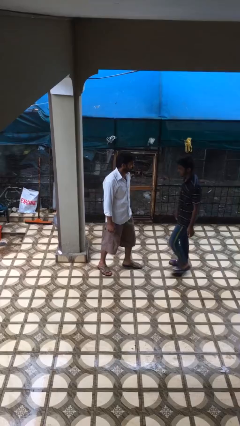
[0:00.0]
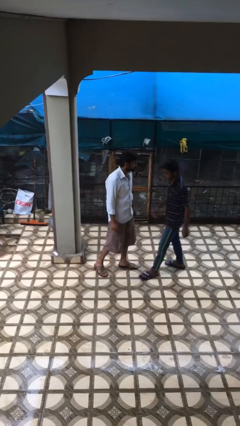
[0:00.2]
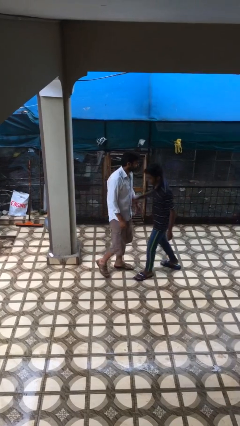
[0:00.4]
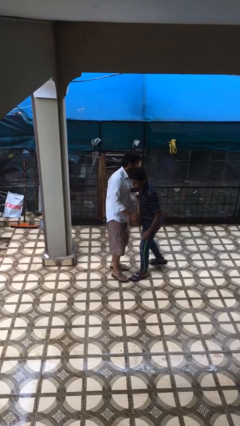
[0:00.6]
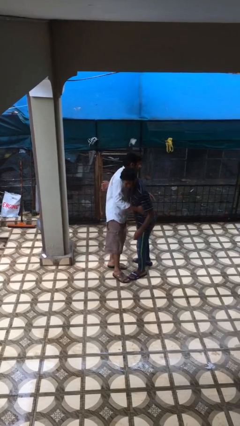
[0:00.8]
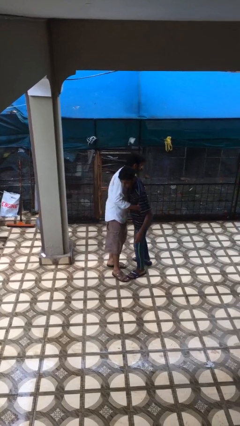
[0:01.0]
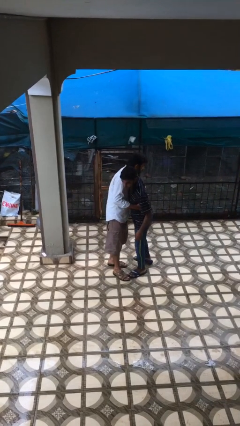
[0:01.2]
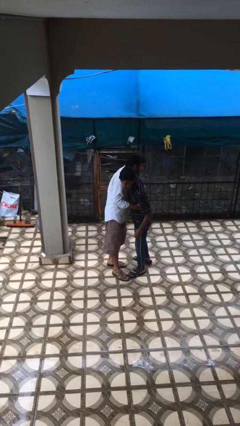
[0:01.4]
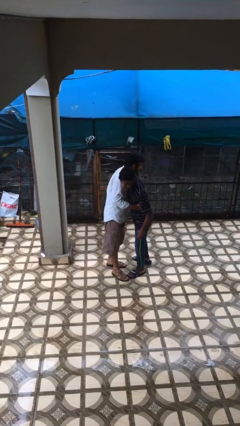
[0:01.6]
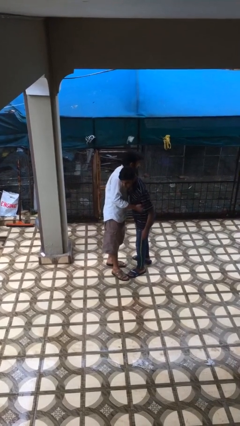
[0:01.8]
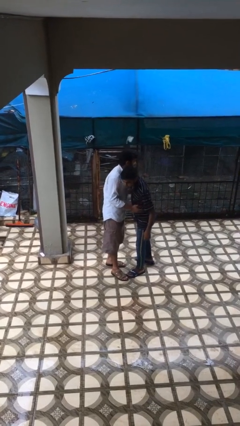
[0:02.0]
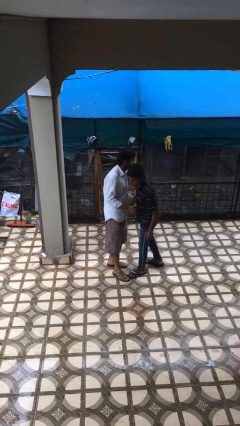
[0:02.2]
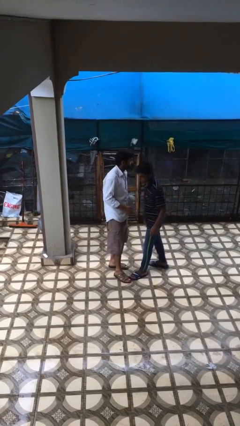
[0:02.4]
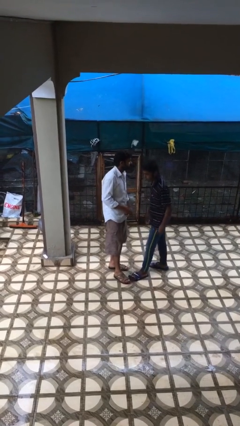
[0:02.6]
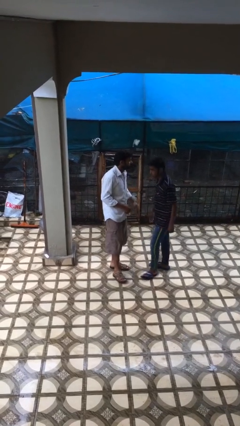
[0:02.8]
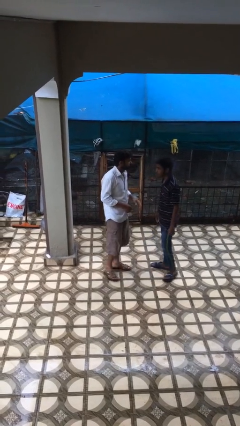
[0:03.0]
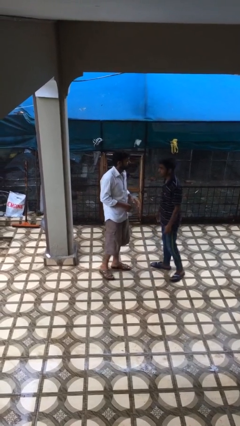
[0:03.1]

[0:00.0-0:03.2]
person embraces person

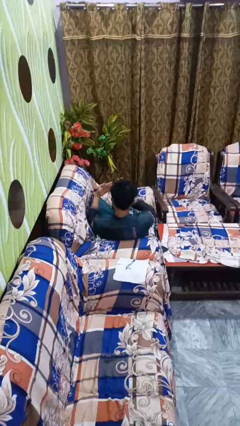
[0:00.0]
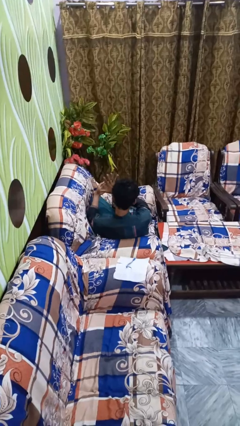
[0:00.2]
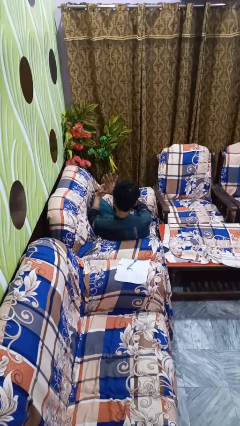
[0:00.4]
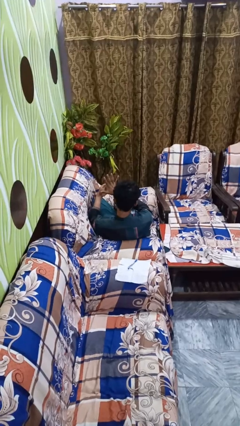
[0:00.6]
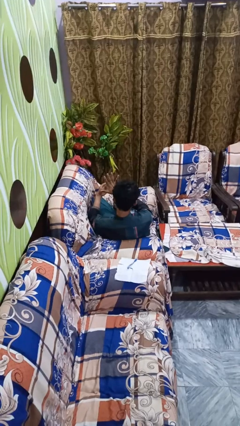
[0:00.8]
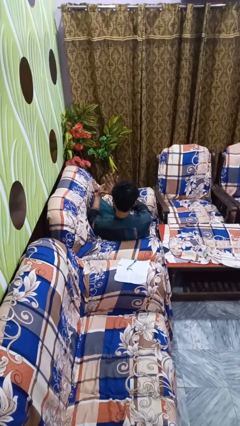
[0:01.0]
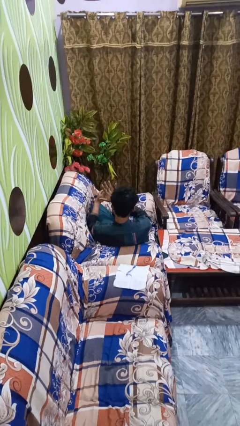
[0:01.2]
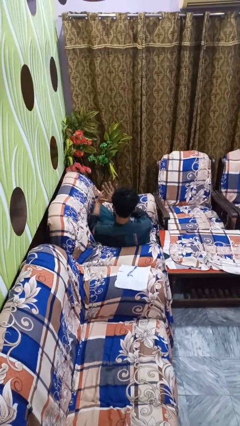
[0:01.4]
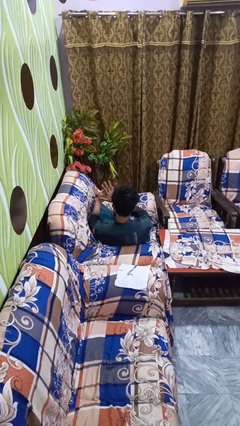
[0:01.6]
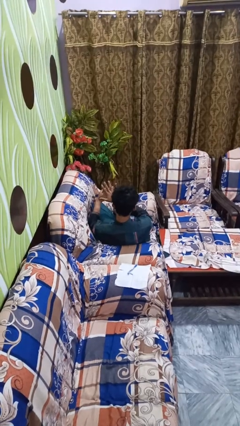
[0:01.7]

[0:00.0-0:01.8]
person gestures number five

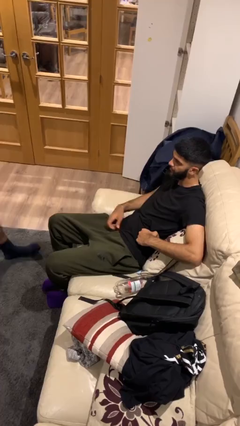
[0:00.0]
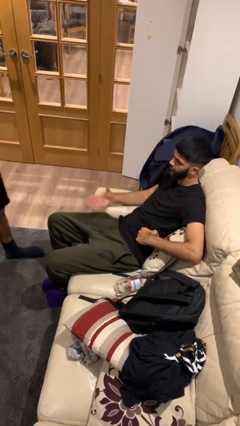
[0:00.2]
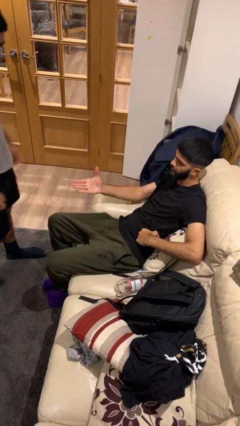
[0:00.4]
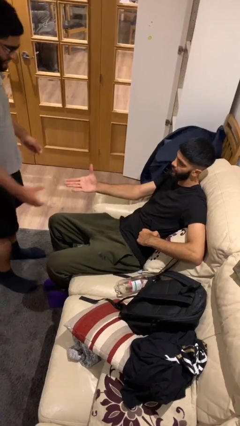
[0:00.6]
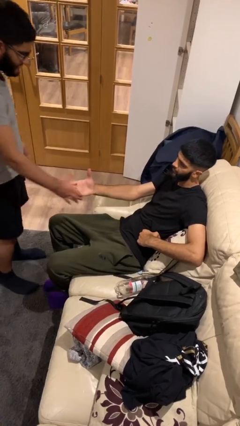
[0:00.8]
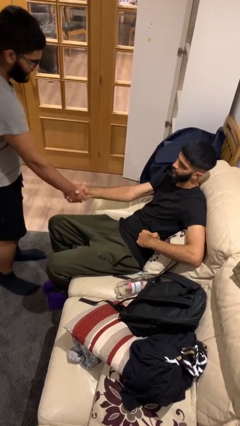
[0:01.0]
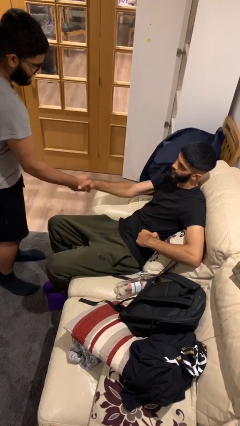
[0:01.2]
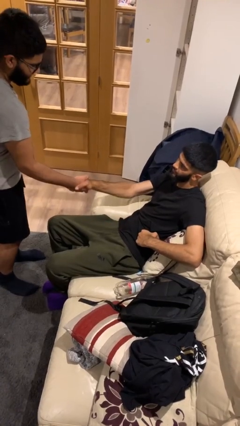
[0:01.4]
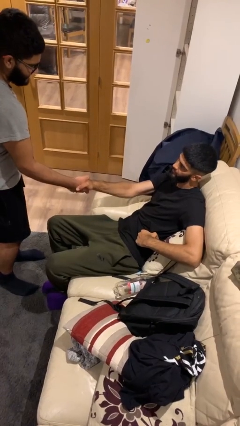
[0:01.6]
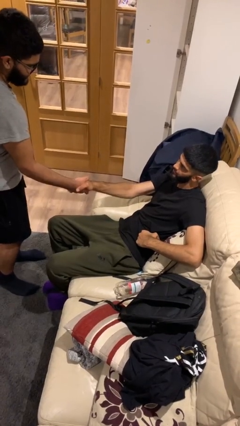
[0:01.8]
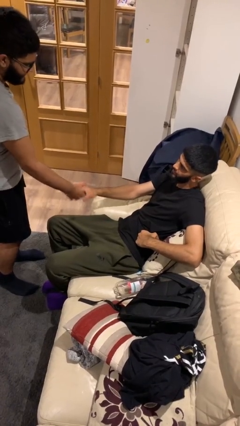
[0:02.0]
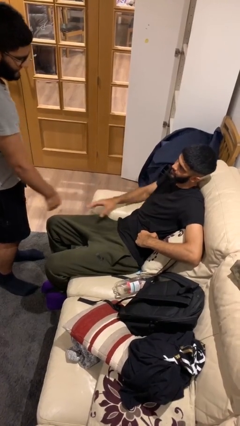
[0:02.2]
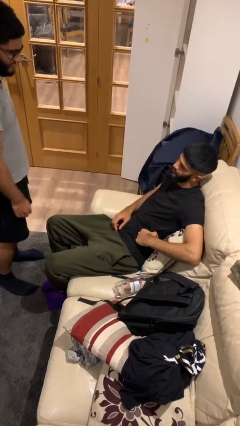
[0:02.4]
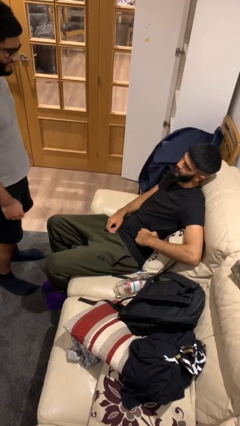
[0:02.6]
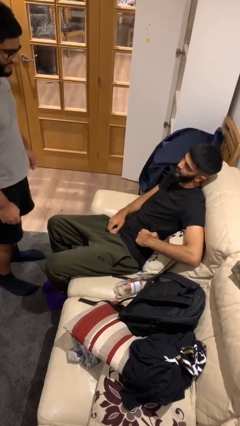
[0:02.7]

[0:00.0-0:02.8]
person shakes hand

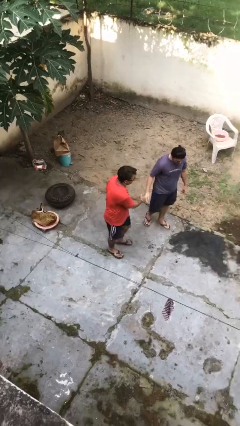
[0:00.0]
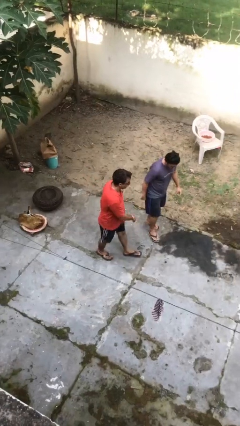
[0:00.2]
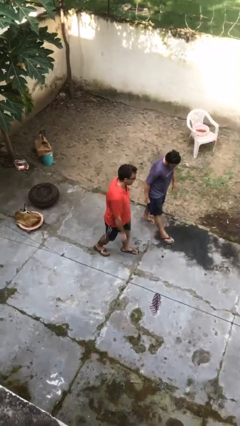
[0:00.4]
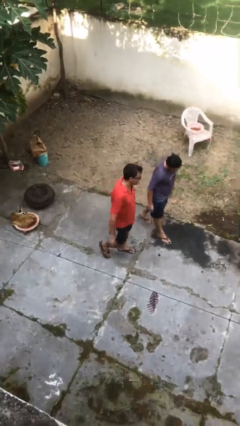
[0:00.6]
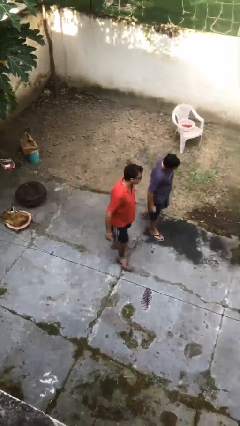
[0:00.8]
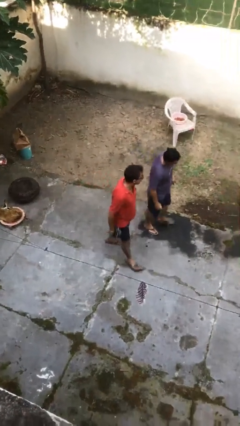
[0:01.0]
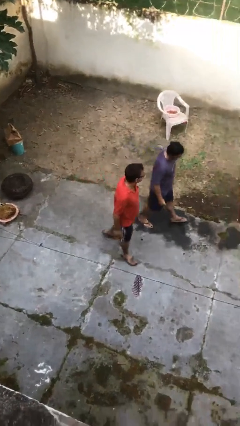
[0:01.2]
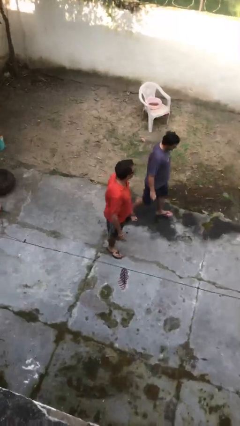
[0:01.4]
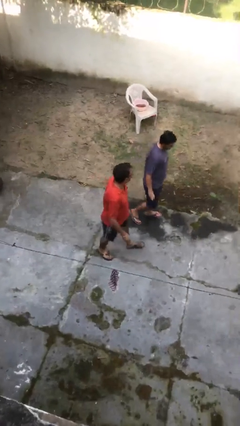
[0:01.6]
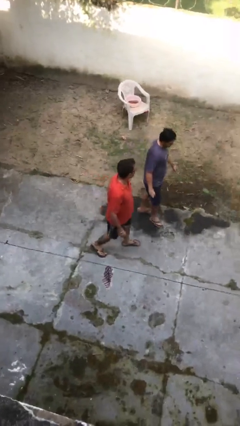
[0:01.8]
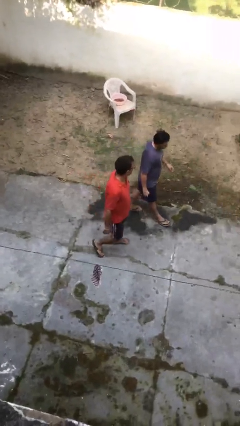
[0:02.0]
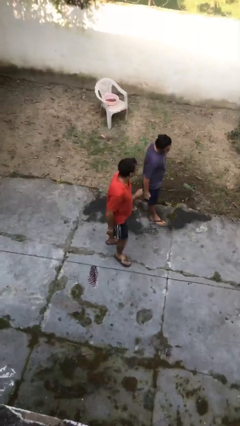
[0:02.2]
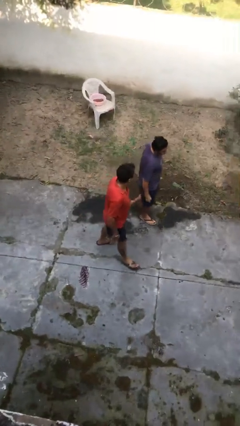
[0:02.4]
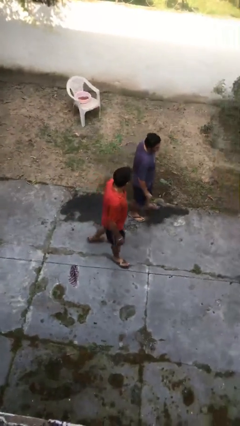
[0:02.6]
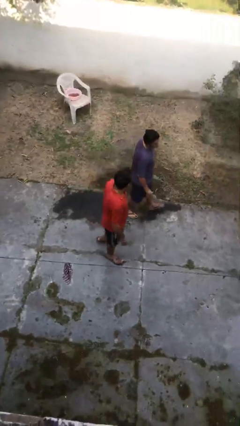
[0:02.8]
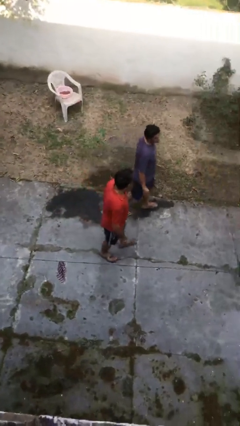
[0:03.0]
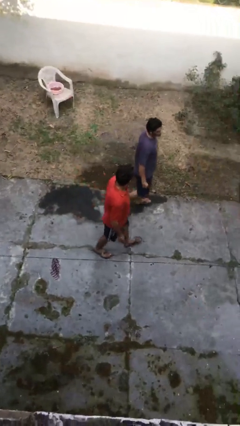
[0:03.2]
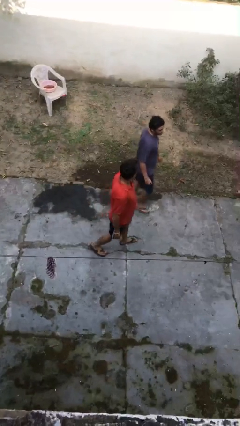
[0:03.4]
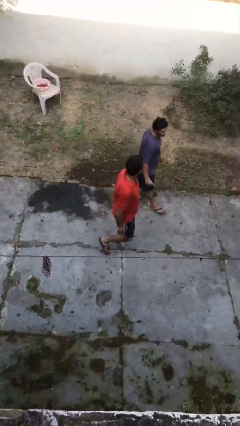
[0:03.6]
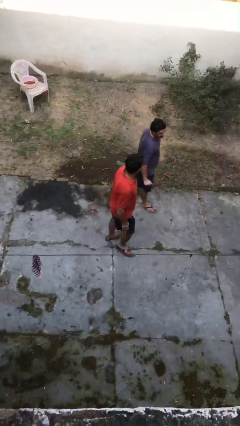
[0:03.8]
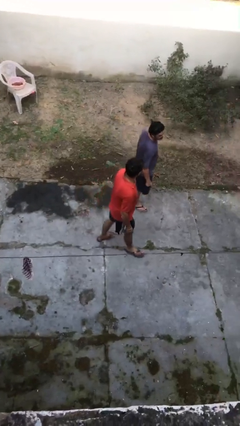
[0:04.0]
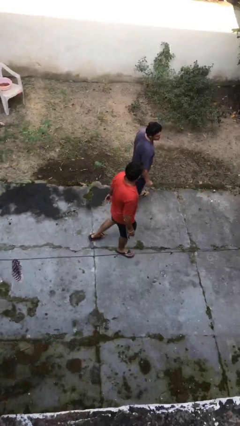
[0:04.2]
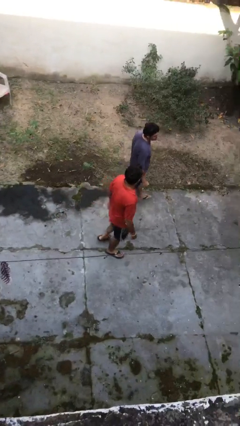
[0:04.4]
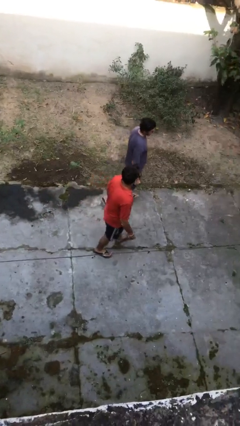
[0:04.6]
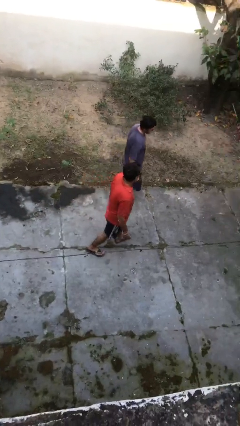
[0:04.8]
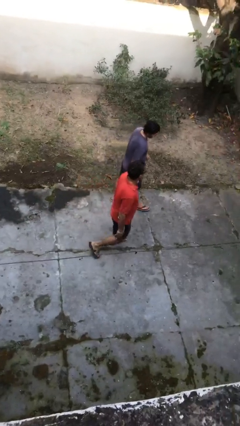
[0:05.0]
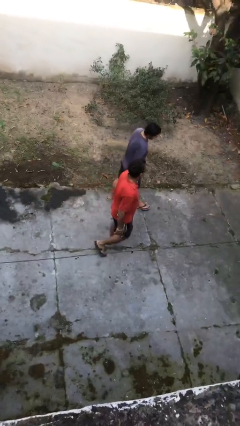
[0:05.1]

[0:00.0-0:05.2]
person talks to person

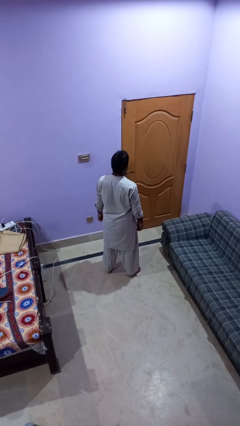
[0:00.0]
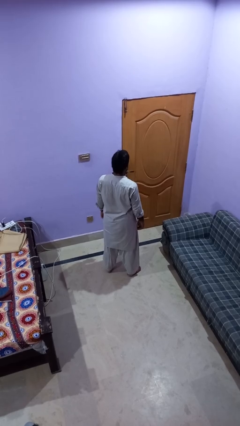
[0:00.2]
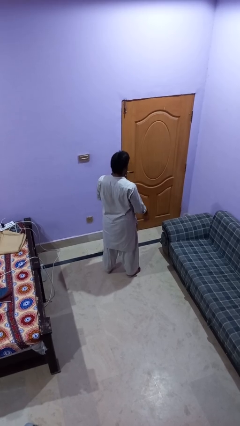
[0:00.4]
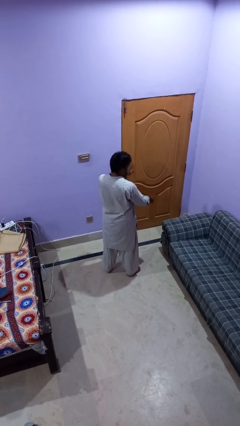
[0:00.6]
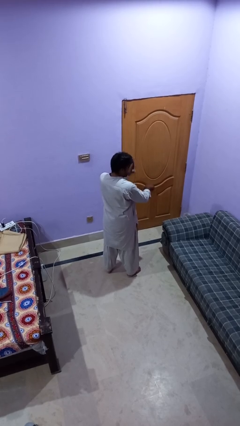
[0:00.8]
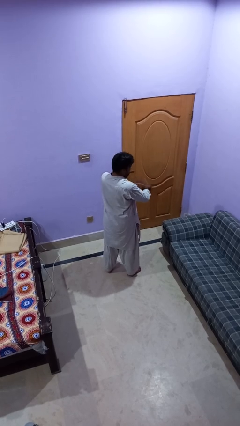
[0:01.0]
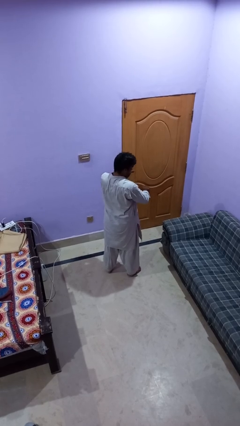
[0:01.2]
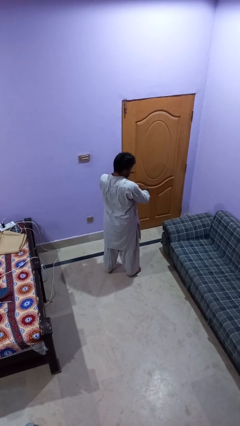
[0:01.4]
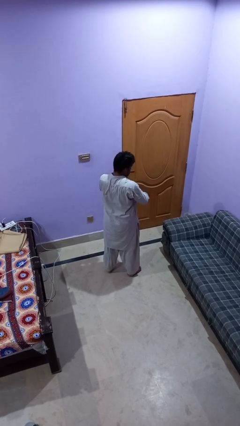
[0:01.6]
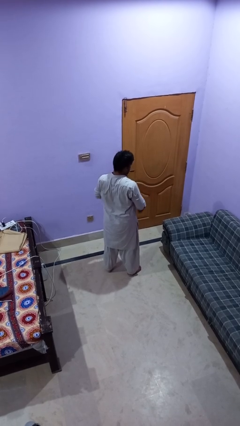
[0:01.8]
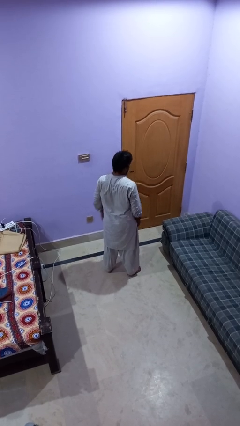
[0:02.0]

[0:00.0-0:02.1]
person swats bug

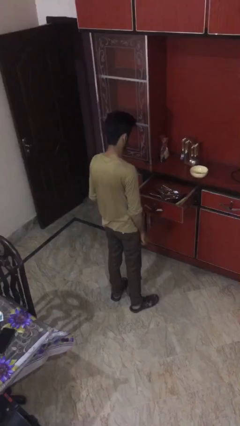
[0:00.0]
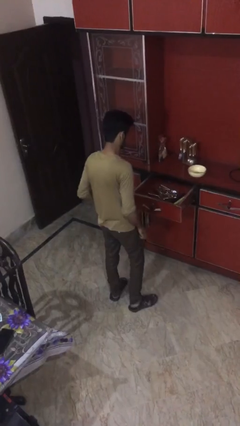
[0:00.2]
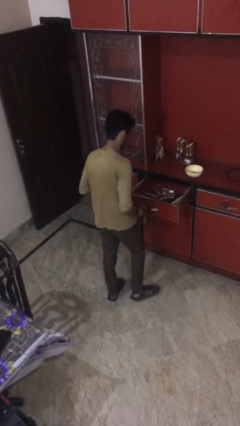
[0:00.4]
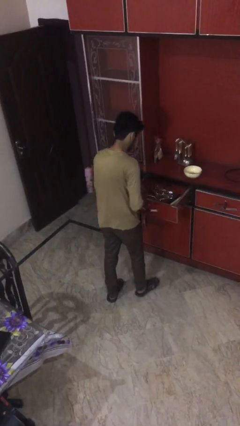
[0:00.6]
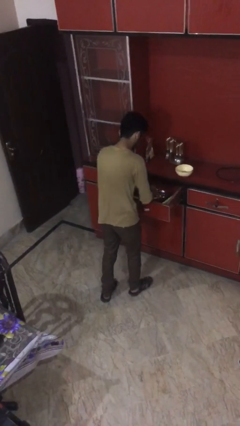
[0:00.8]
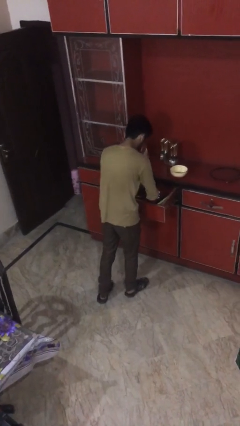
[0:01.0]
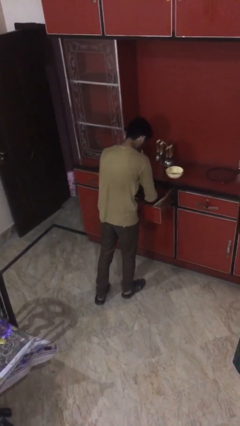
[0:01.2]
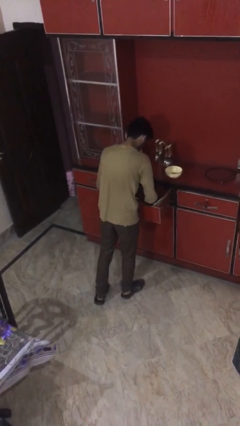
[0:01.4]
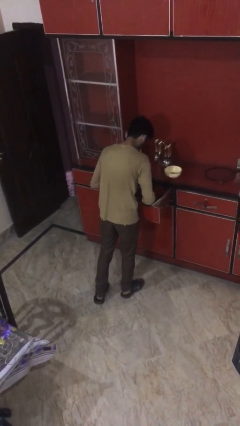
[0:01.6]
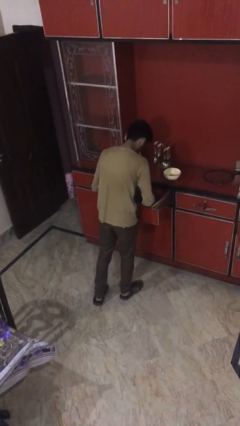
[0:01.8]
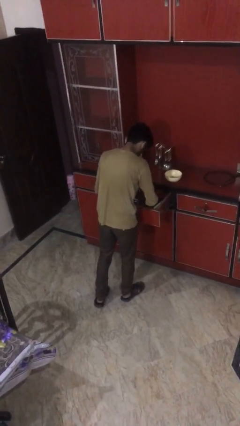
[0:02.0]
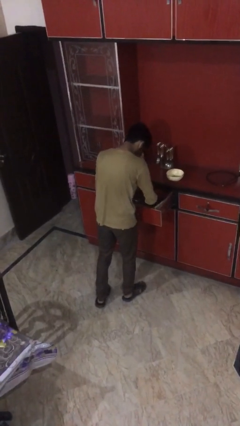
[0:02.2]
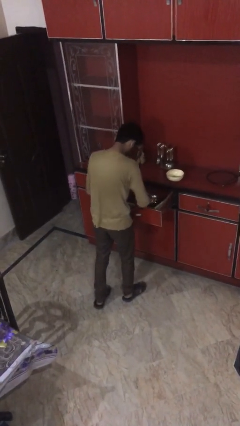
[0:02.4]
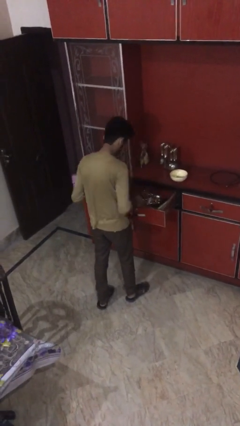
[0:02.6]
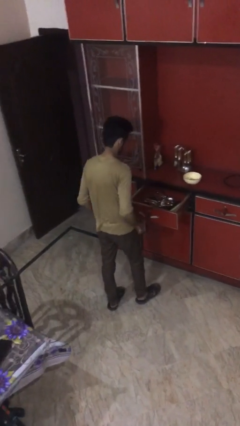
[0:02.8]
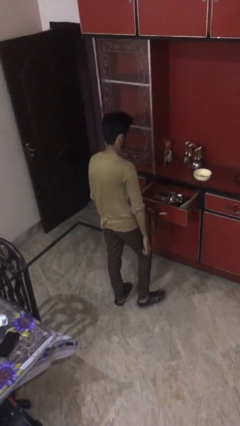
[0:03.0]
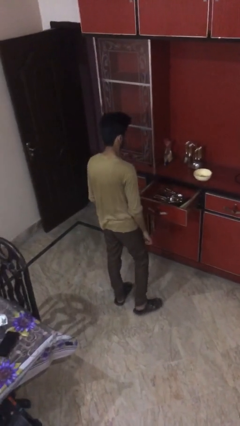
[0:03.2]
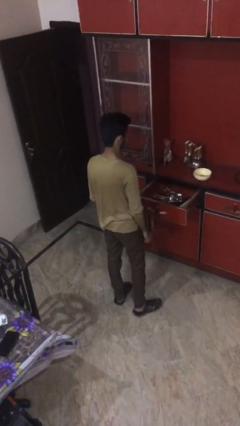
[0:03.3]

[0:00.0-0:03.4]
person searches in kitchen drawer
